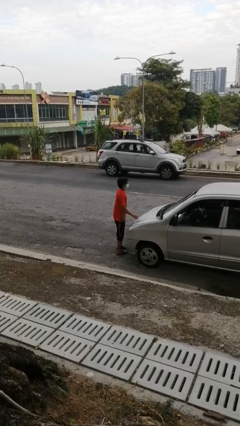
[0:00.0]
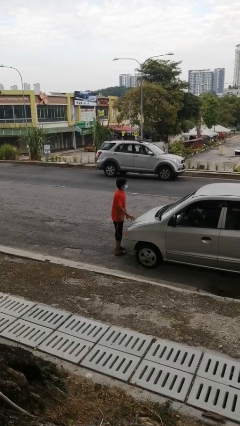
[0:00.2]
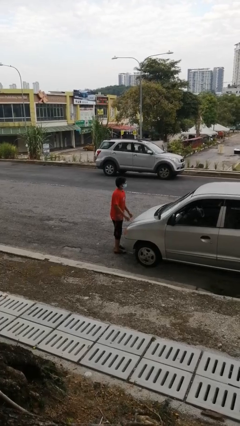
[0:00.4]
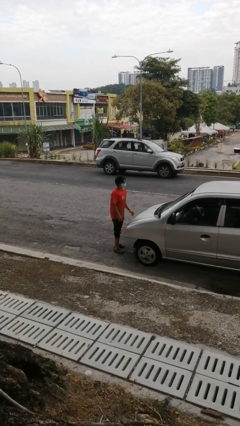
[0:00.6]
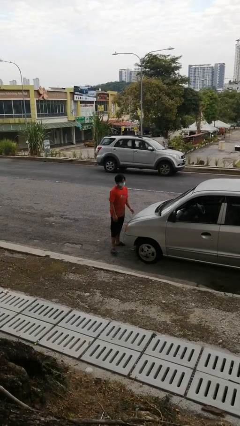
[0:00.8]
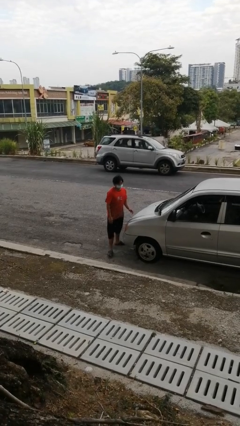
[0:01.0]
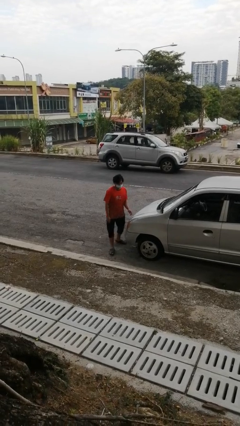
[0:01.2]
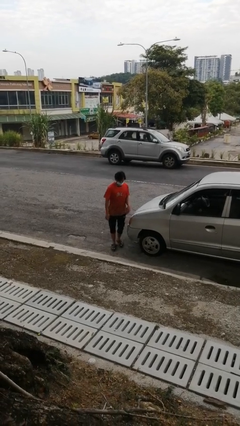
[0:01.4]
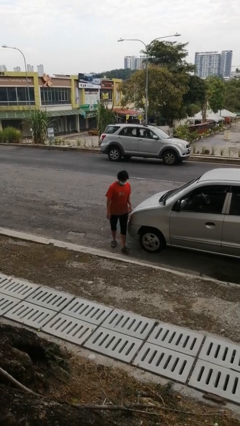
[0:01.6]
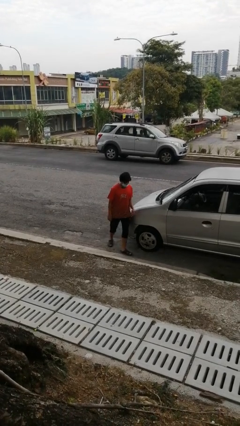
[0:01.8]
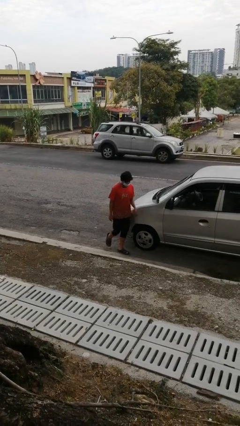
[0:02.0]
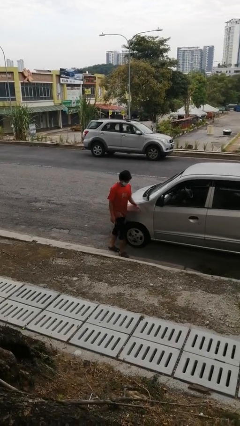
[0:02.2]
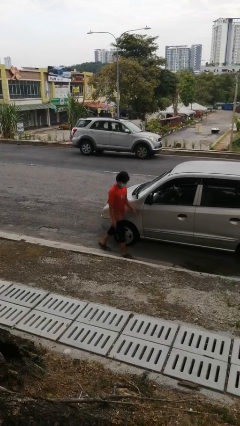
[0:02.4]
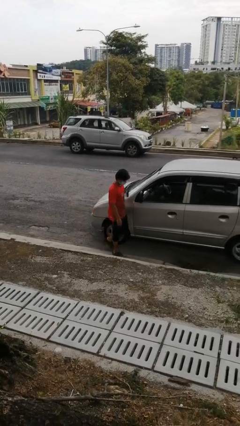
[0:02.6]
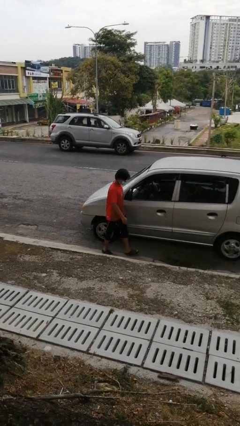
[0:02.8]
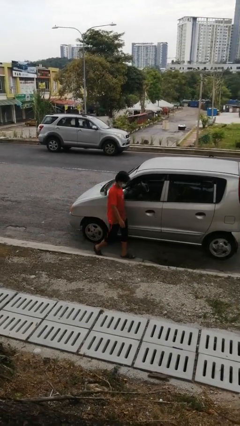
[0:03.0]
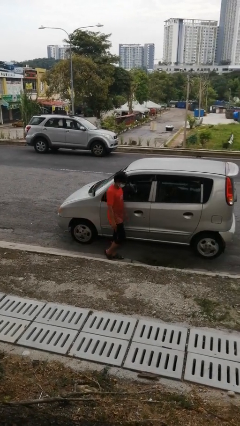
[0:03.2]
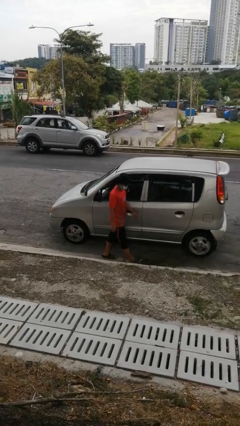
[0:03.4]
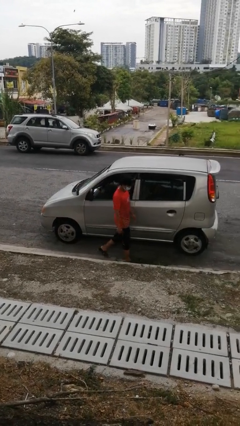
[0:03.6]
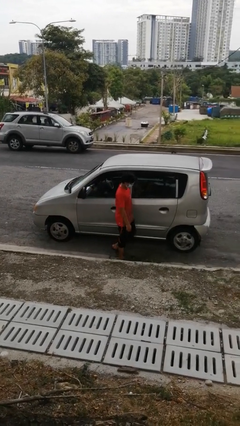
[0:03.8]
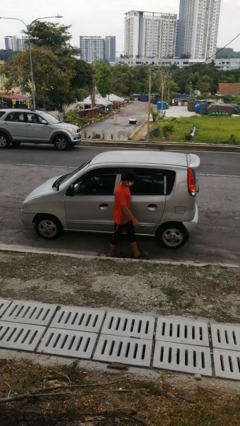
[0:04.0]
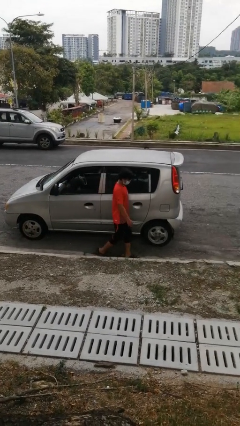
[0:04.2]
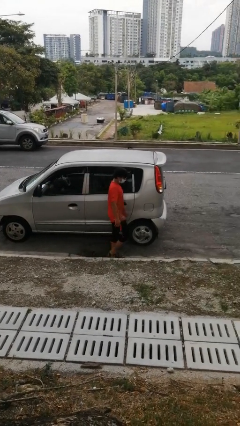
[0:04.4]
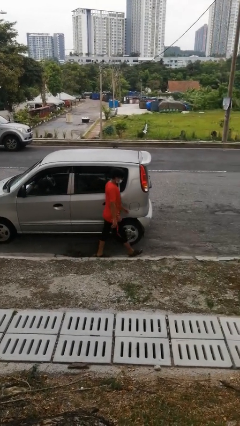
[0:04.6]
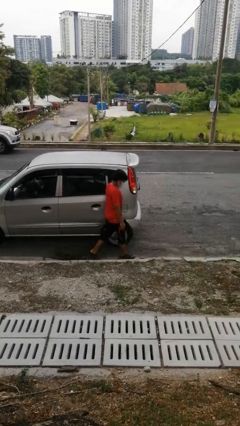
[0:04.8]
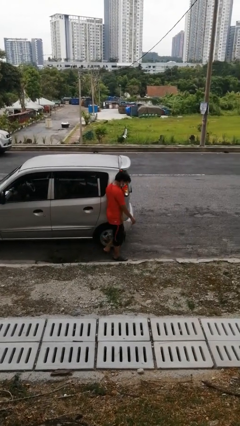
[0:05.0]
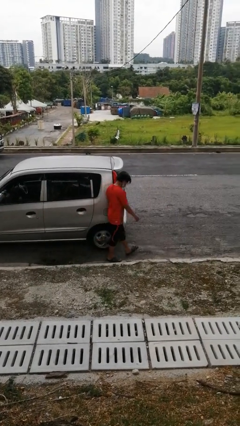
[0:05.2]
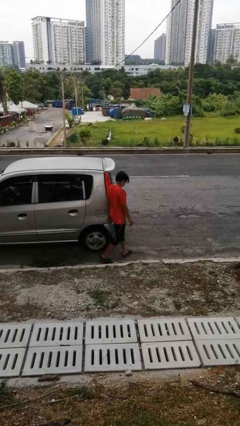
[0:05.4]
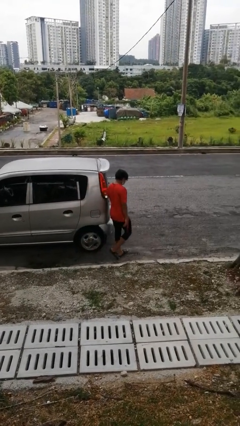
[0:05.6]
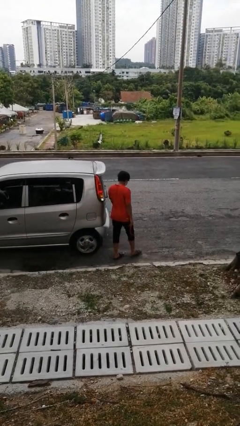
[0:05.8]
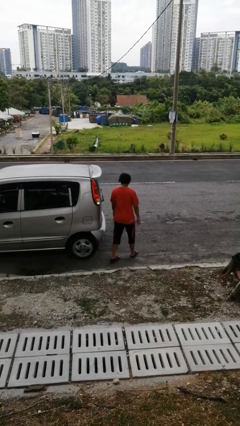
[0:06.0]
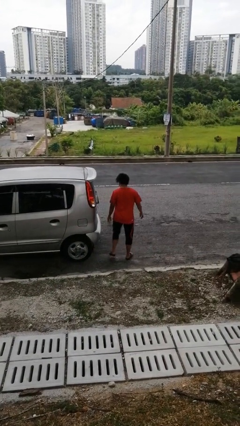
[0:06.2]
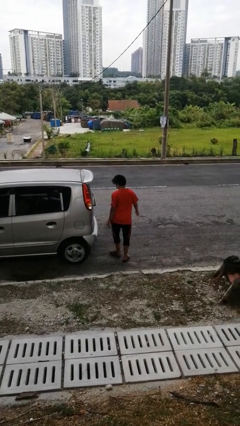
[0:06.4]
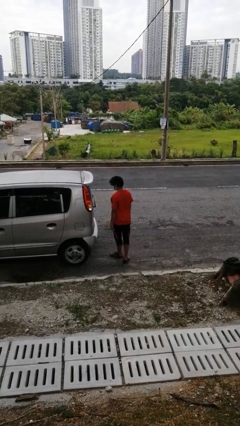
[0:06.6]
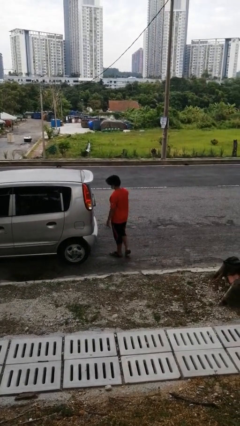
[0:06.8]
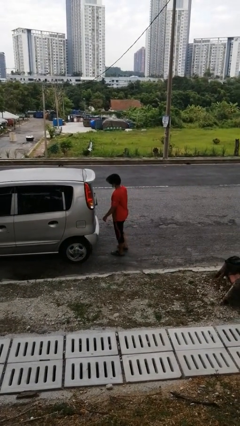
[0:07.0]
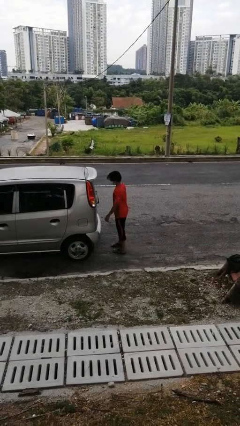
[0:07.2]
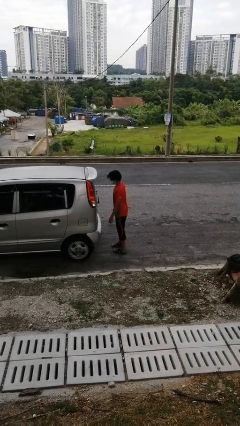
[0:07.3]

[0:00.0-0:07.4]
person walks around car

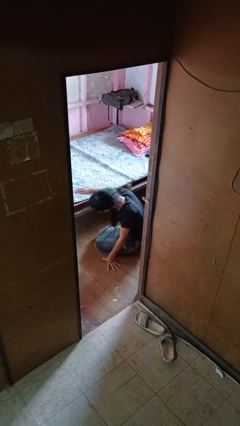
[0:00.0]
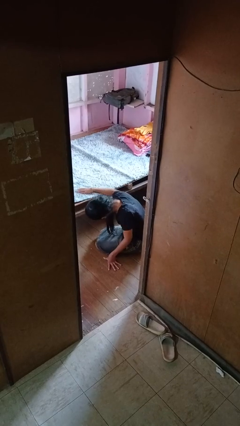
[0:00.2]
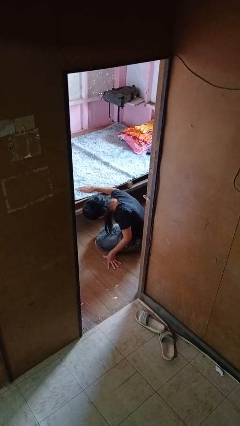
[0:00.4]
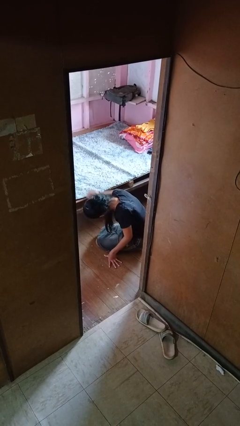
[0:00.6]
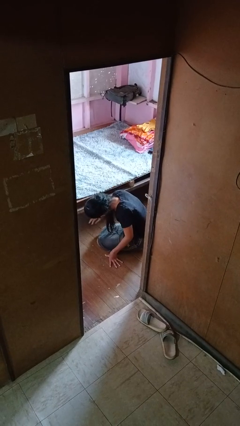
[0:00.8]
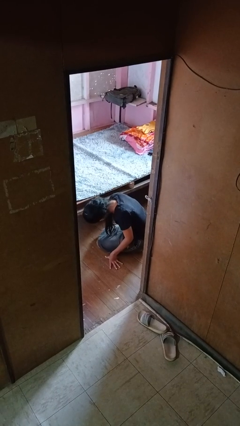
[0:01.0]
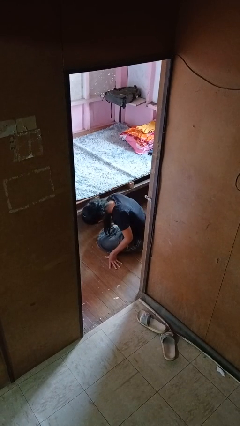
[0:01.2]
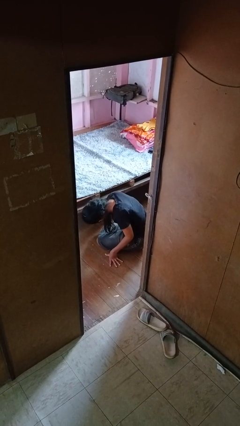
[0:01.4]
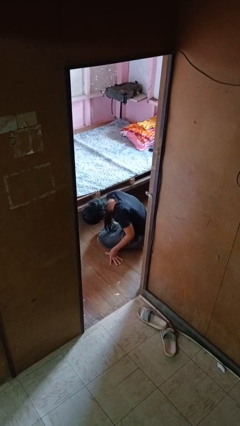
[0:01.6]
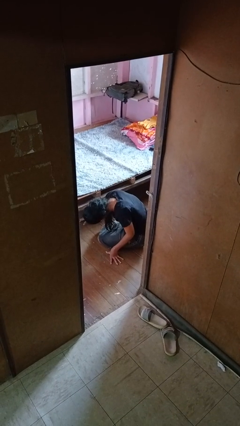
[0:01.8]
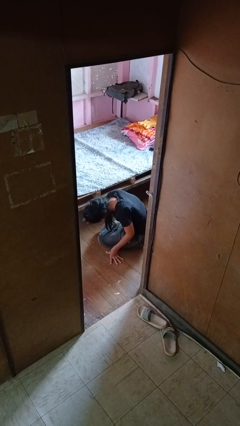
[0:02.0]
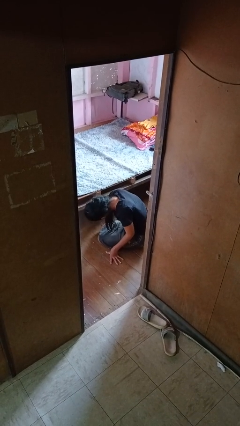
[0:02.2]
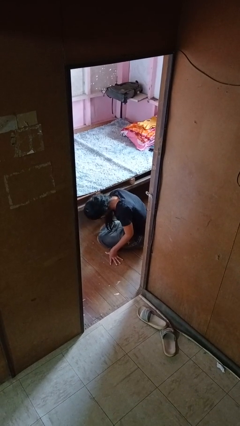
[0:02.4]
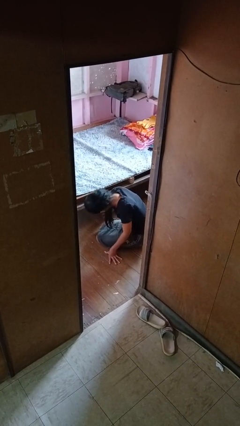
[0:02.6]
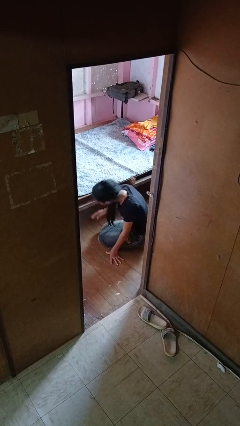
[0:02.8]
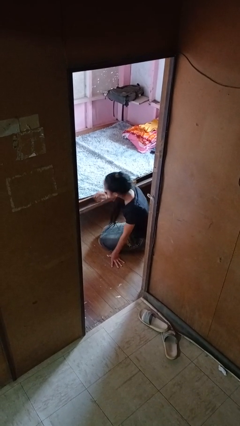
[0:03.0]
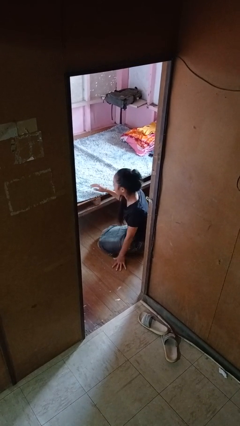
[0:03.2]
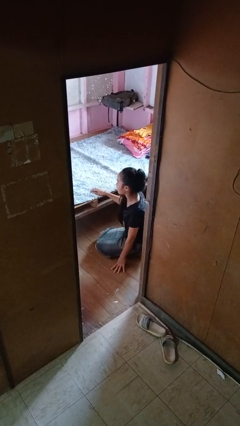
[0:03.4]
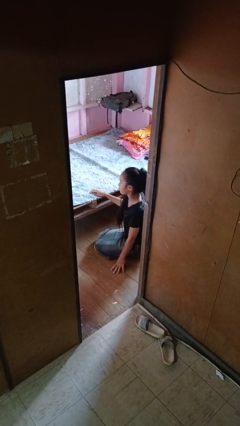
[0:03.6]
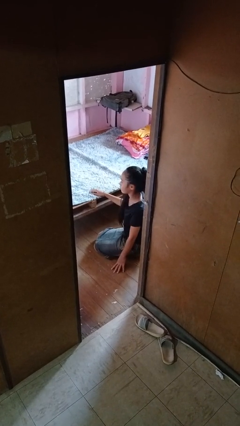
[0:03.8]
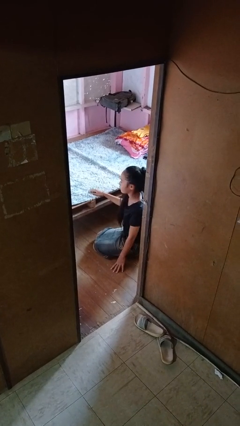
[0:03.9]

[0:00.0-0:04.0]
person searches under bed

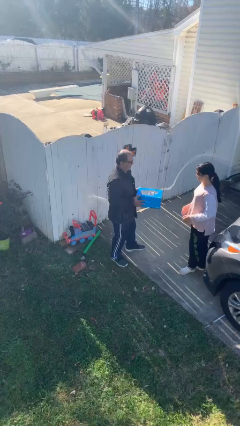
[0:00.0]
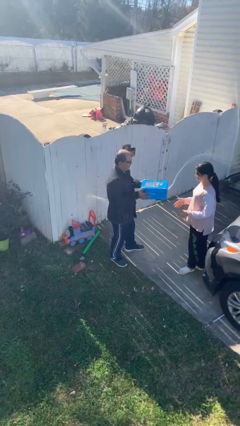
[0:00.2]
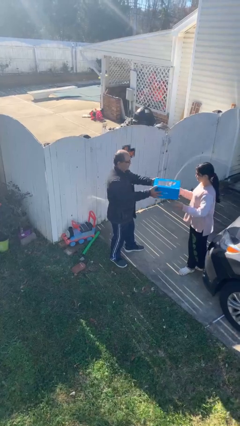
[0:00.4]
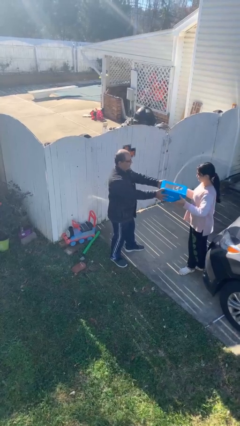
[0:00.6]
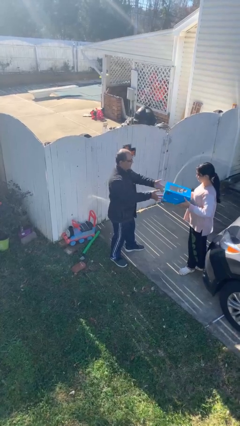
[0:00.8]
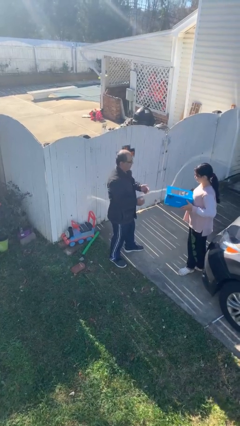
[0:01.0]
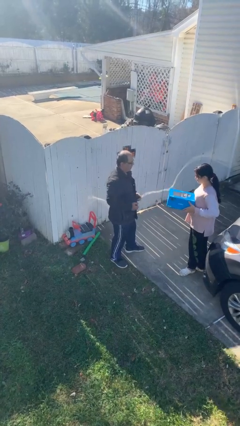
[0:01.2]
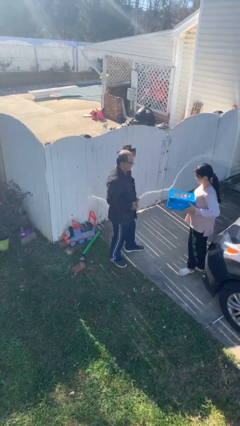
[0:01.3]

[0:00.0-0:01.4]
person transfers object to person

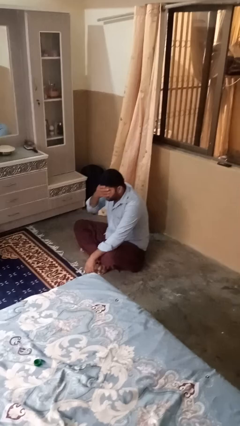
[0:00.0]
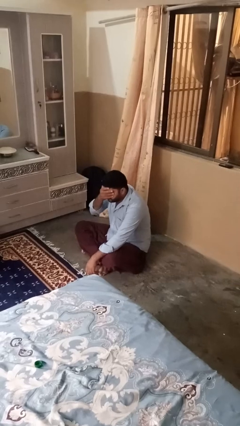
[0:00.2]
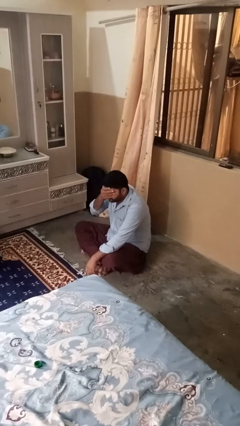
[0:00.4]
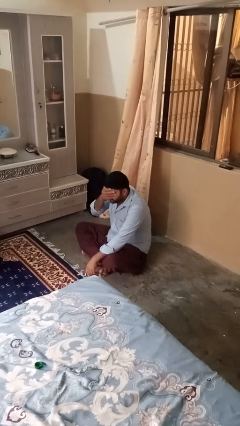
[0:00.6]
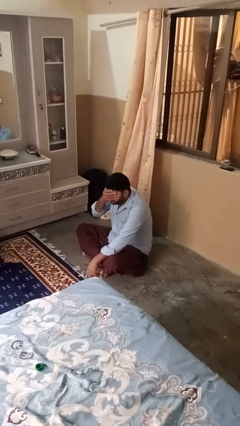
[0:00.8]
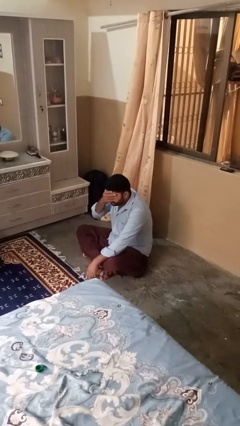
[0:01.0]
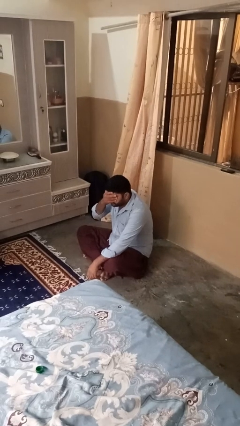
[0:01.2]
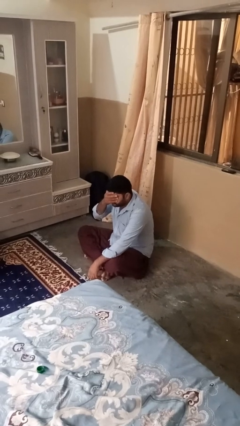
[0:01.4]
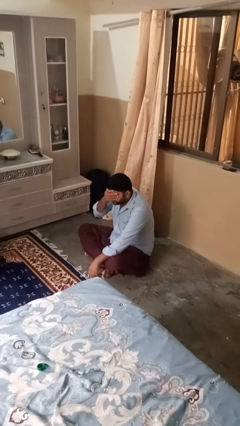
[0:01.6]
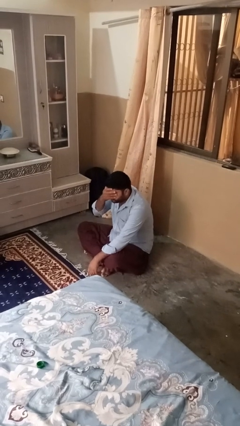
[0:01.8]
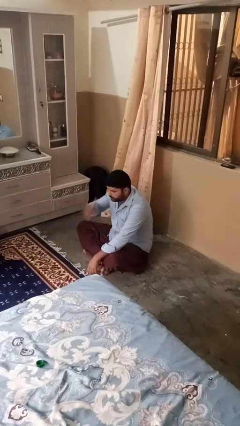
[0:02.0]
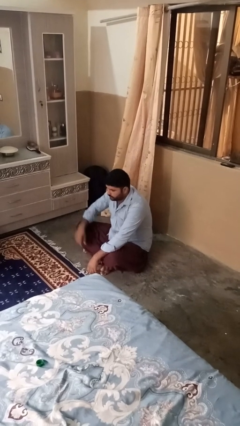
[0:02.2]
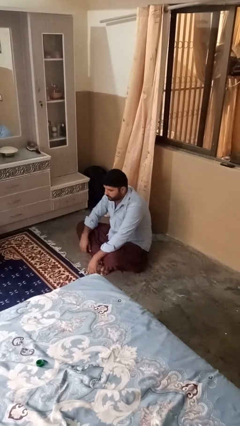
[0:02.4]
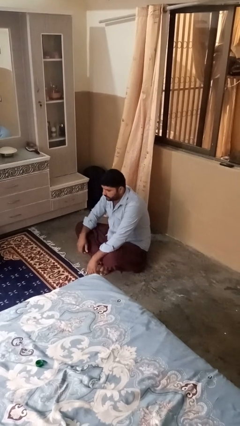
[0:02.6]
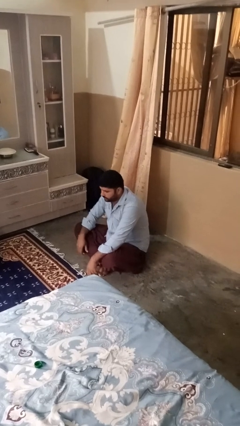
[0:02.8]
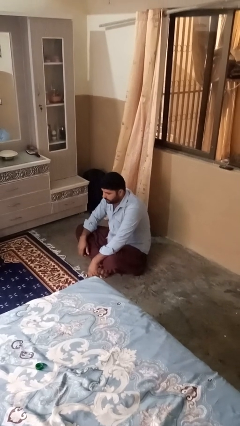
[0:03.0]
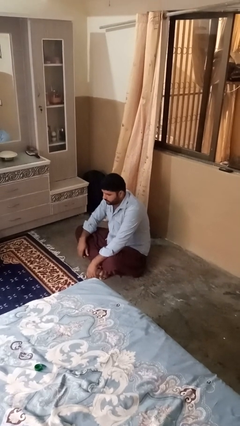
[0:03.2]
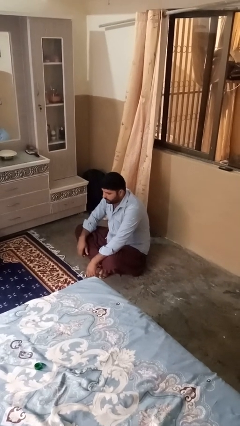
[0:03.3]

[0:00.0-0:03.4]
person covers face with hands

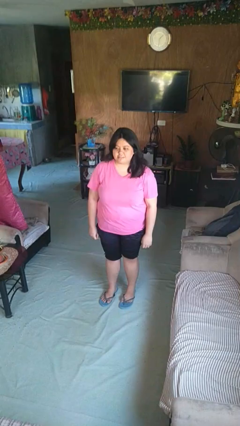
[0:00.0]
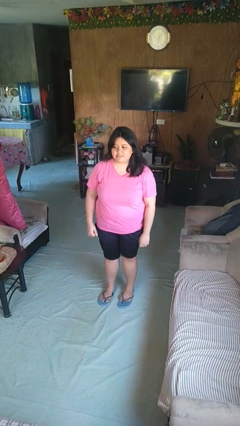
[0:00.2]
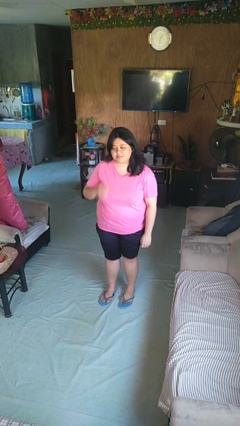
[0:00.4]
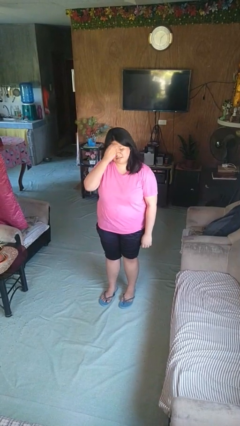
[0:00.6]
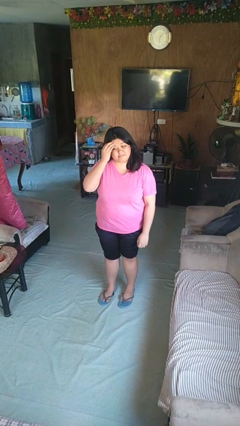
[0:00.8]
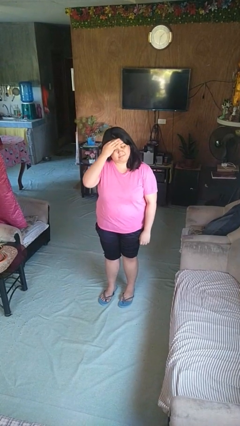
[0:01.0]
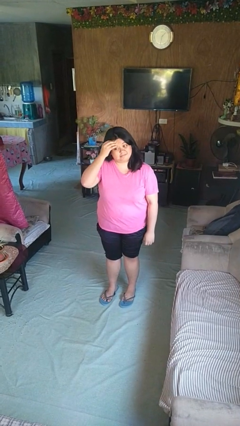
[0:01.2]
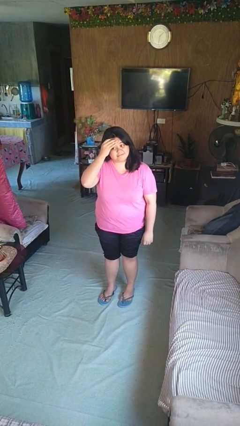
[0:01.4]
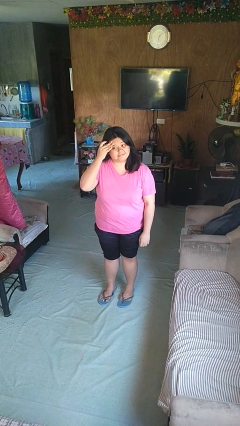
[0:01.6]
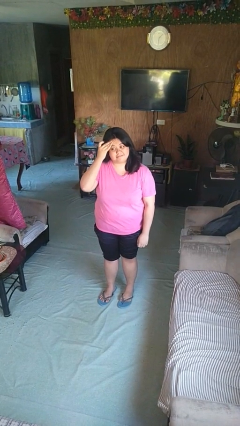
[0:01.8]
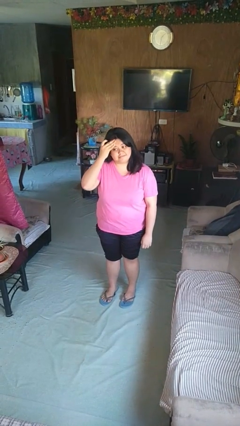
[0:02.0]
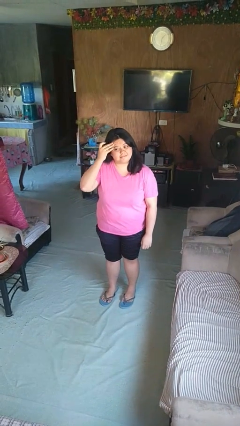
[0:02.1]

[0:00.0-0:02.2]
person scratches face
